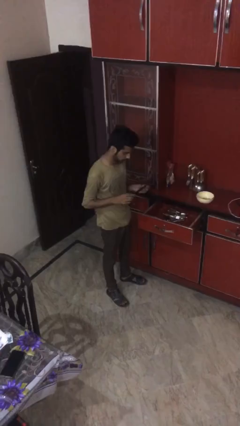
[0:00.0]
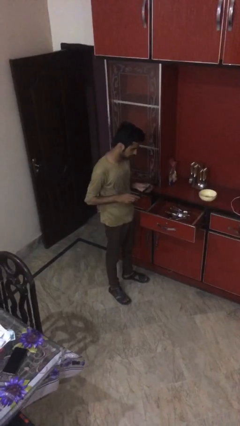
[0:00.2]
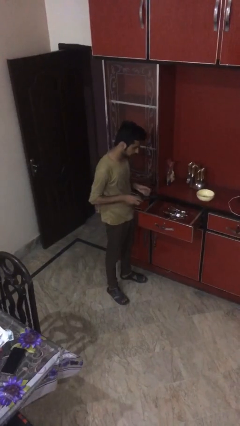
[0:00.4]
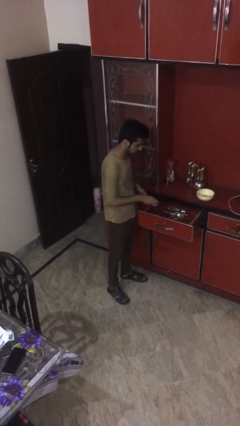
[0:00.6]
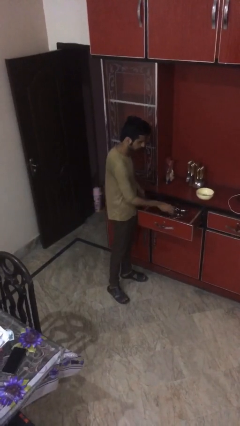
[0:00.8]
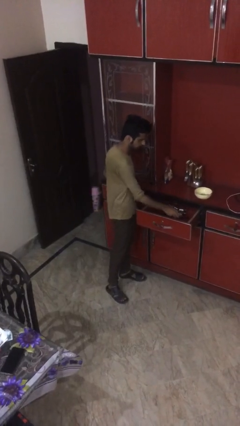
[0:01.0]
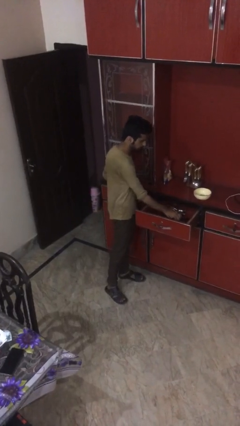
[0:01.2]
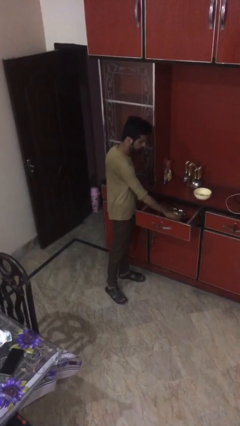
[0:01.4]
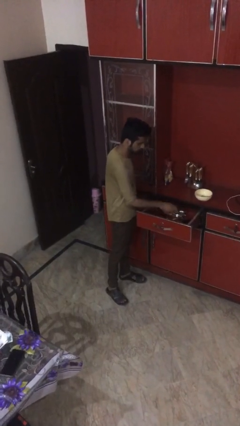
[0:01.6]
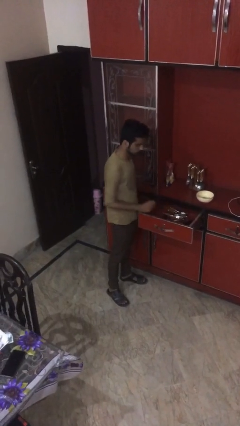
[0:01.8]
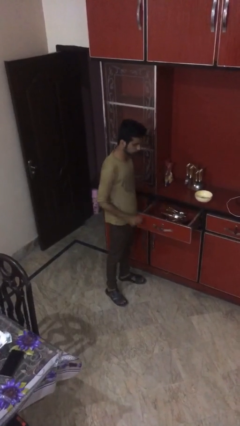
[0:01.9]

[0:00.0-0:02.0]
person puts object into kitchen drawer

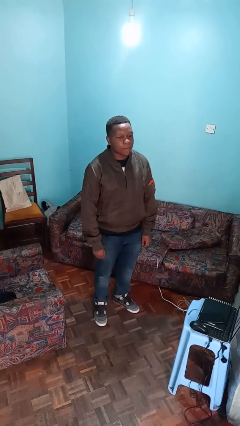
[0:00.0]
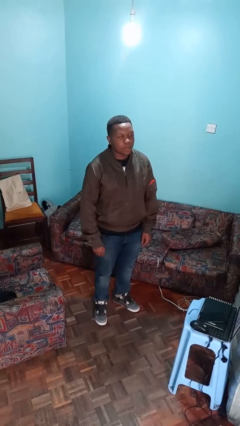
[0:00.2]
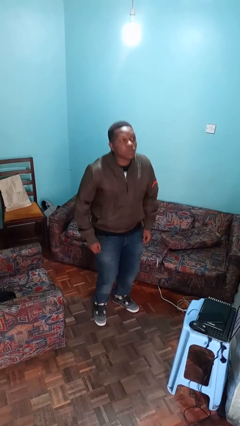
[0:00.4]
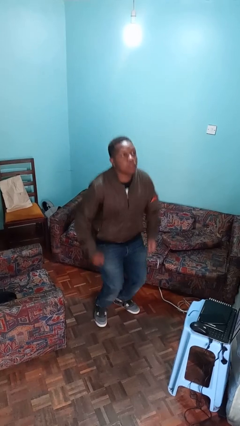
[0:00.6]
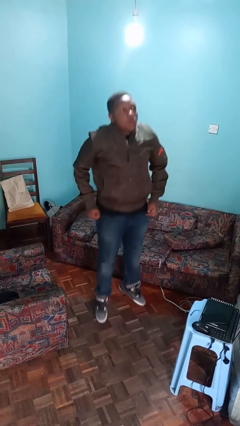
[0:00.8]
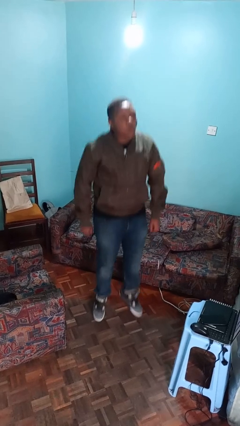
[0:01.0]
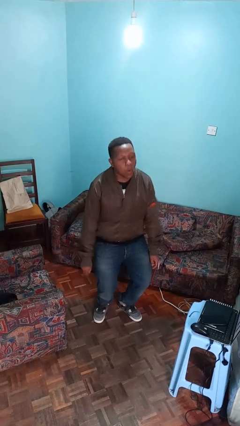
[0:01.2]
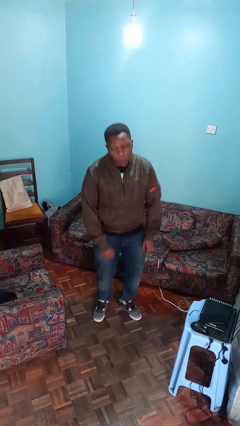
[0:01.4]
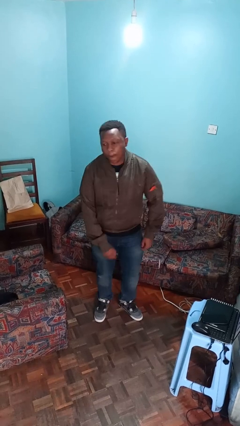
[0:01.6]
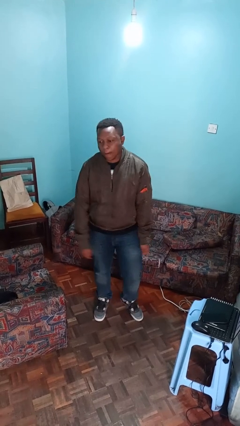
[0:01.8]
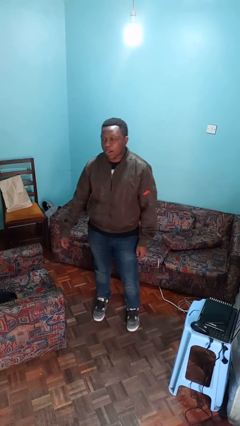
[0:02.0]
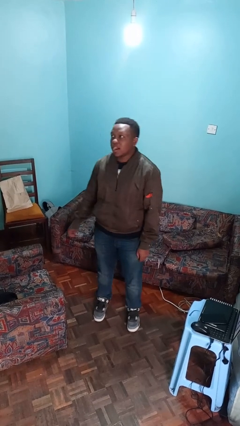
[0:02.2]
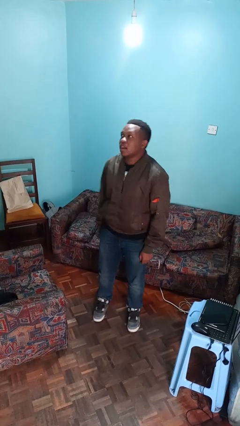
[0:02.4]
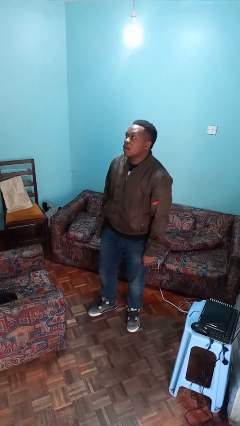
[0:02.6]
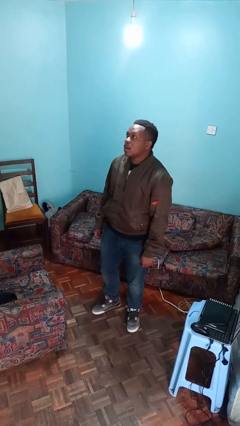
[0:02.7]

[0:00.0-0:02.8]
person jumps

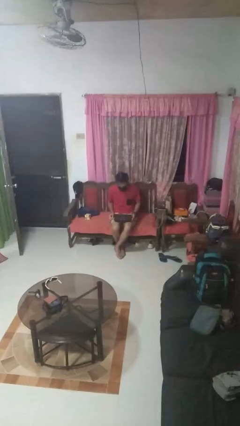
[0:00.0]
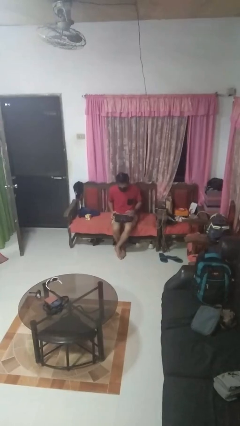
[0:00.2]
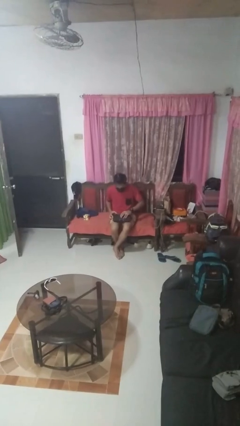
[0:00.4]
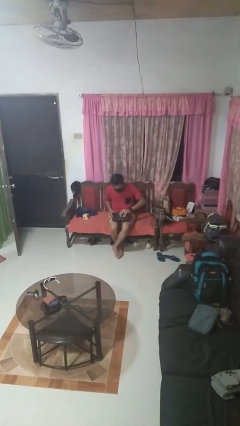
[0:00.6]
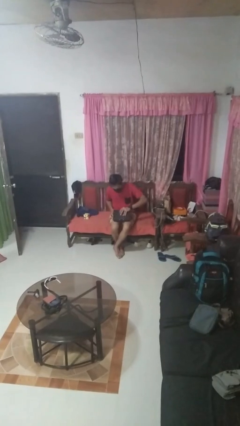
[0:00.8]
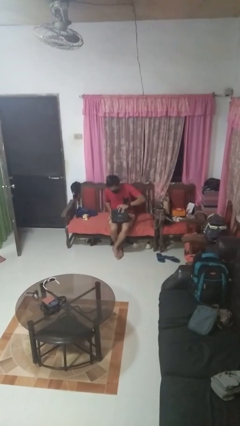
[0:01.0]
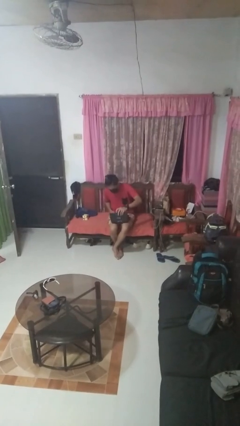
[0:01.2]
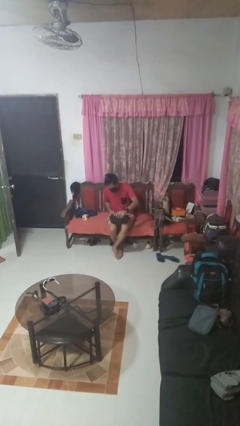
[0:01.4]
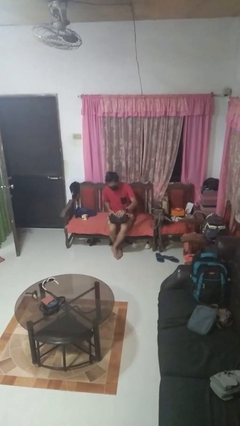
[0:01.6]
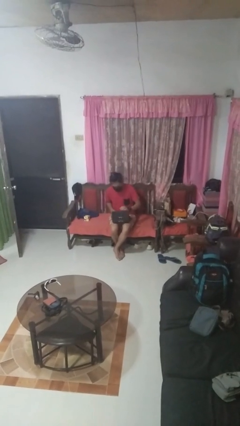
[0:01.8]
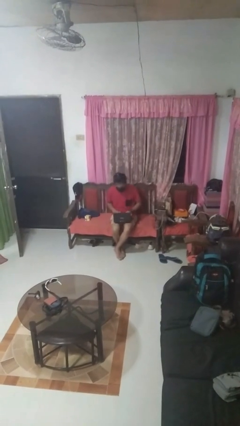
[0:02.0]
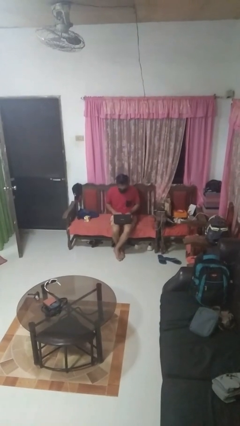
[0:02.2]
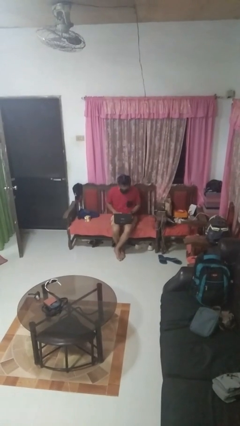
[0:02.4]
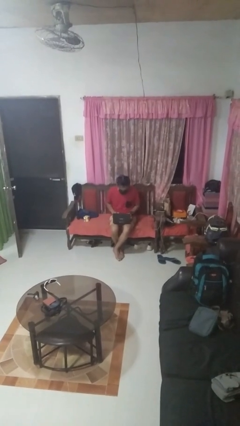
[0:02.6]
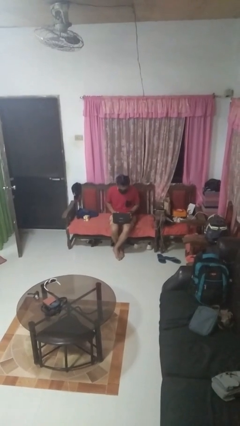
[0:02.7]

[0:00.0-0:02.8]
person opens laptop

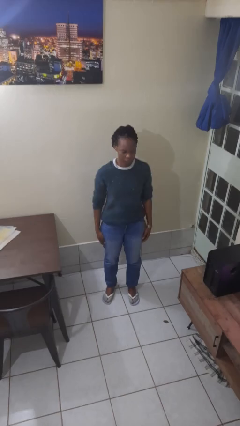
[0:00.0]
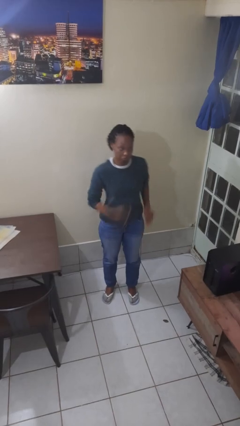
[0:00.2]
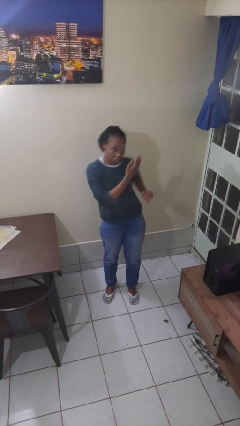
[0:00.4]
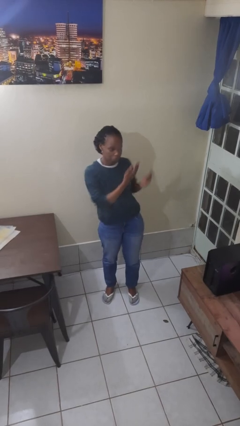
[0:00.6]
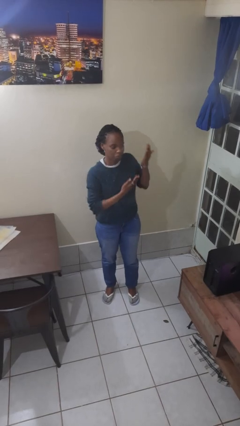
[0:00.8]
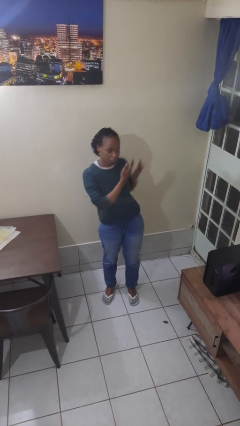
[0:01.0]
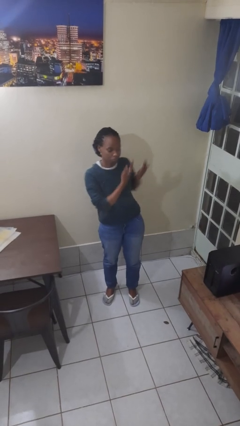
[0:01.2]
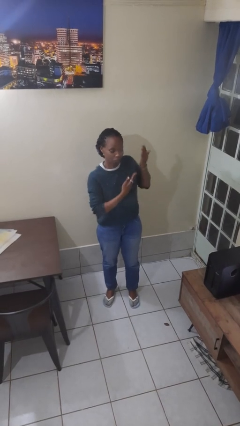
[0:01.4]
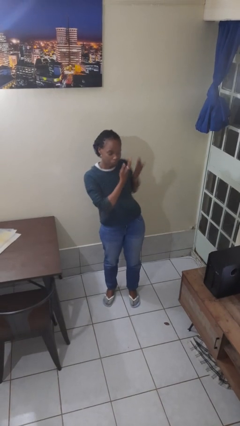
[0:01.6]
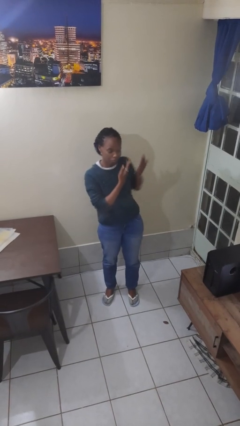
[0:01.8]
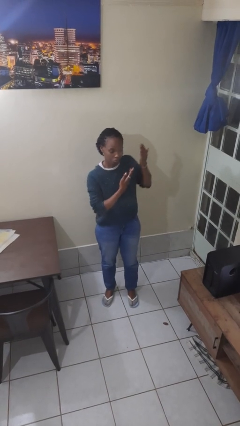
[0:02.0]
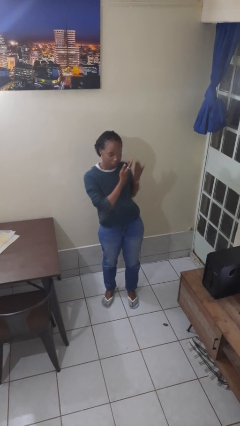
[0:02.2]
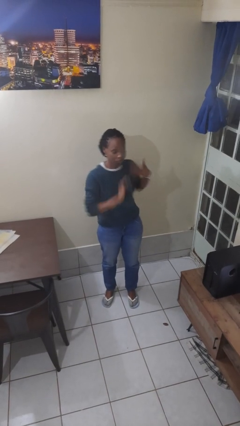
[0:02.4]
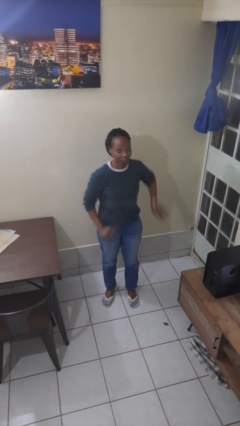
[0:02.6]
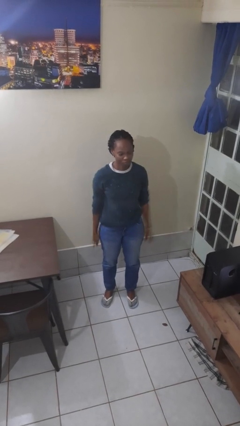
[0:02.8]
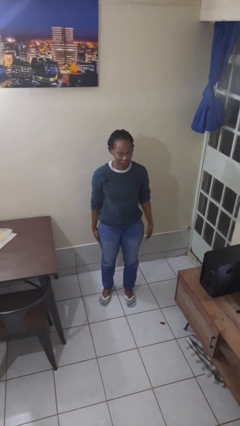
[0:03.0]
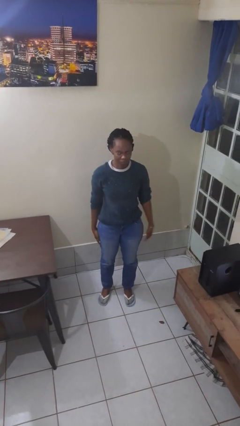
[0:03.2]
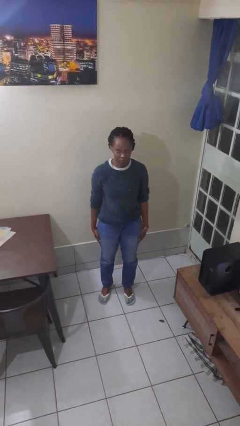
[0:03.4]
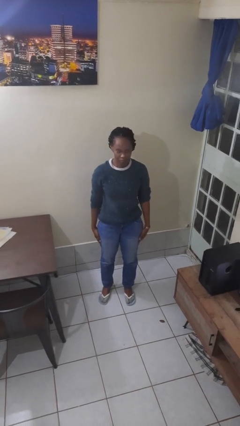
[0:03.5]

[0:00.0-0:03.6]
person dances in place

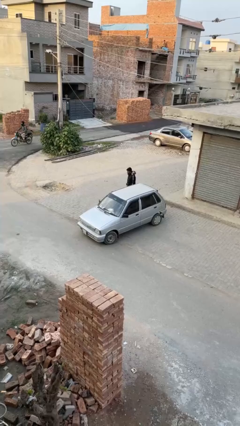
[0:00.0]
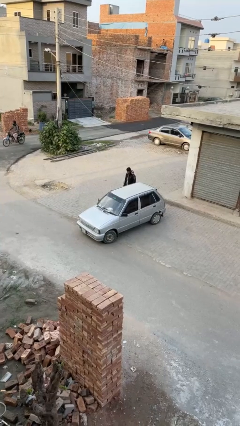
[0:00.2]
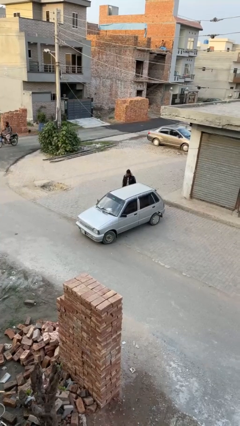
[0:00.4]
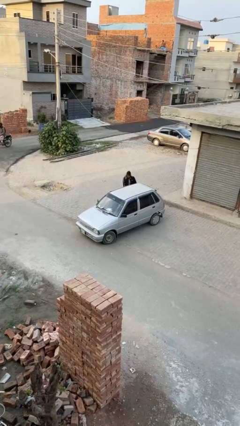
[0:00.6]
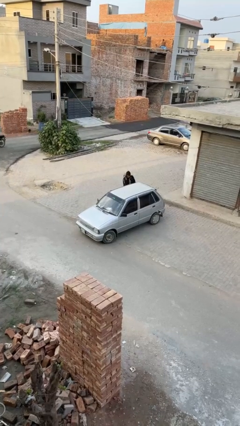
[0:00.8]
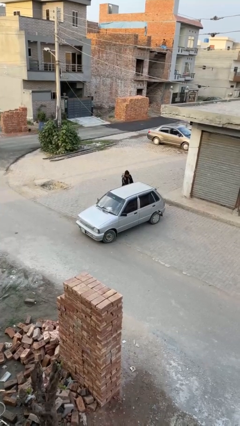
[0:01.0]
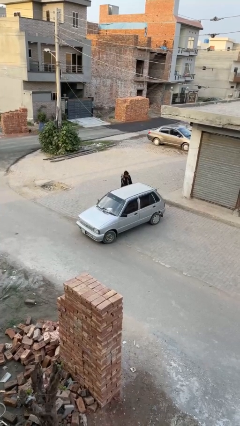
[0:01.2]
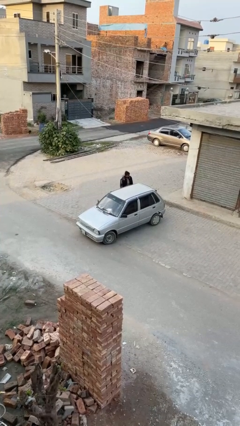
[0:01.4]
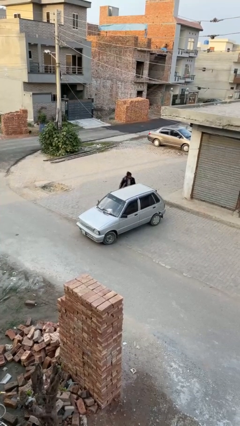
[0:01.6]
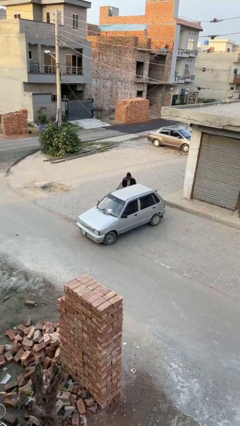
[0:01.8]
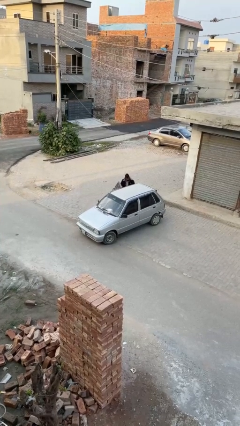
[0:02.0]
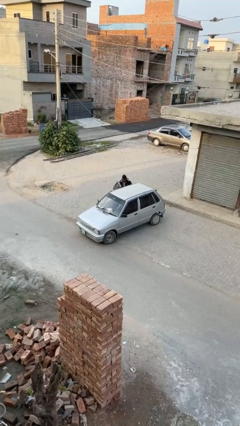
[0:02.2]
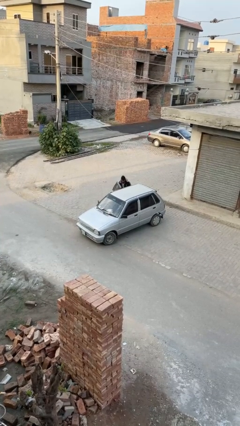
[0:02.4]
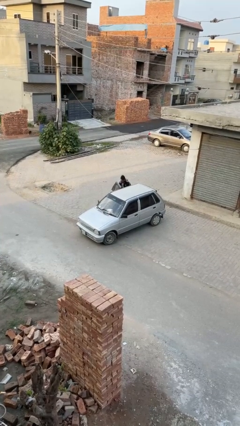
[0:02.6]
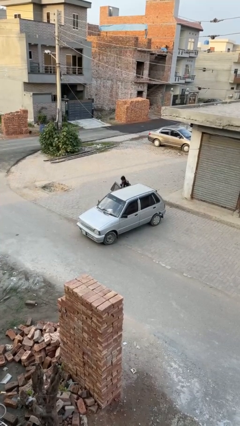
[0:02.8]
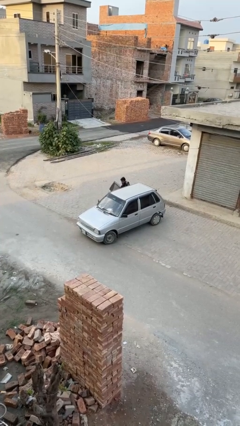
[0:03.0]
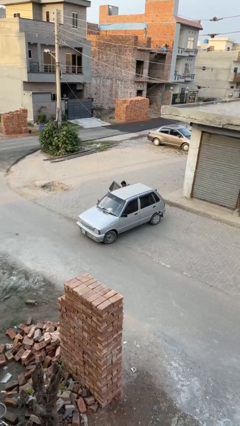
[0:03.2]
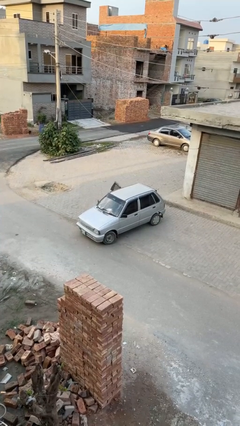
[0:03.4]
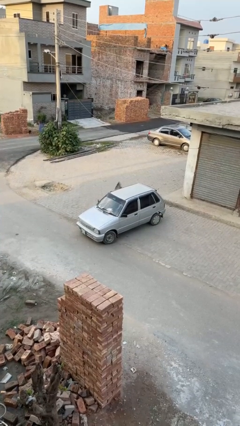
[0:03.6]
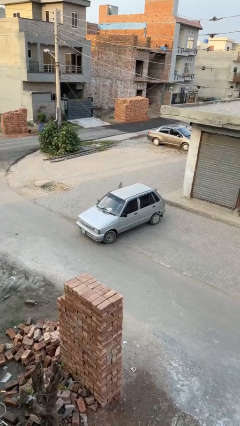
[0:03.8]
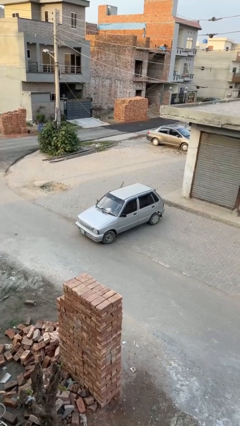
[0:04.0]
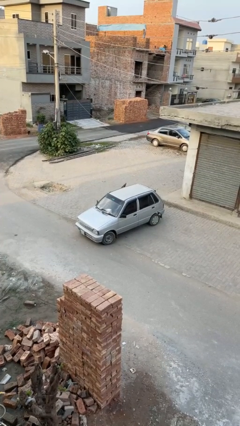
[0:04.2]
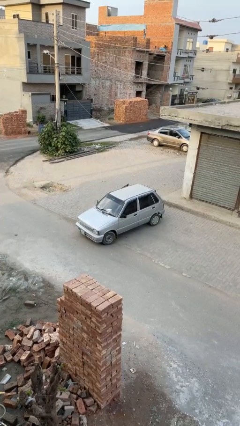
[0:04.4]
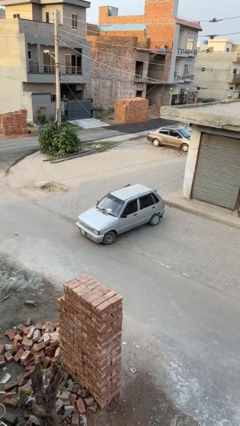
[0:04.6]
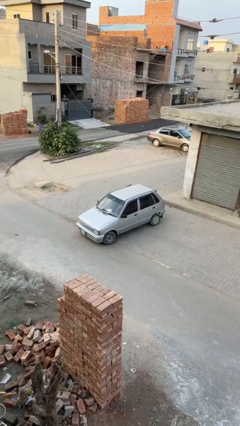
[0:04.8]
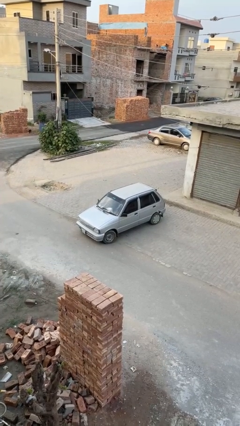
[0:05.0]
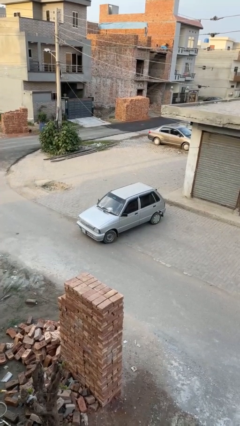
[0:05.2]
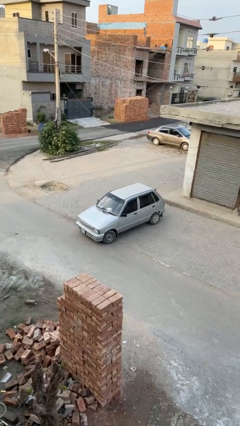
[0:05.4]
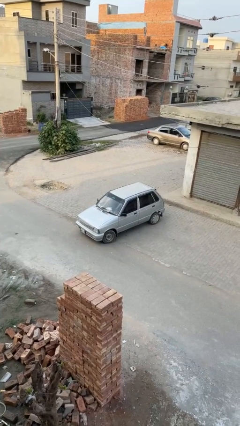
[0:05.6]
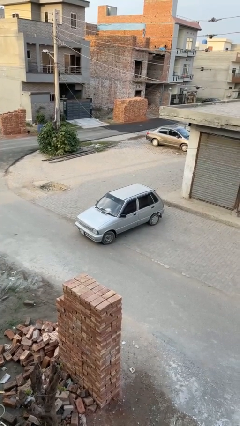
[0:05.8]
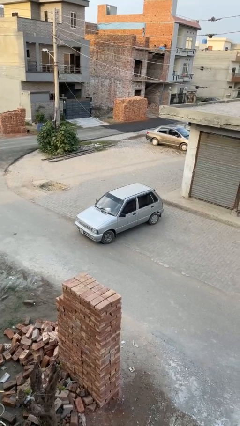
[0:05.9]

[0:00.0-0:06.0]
car picks up person

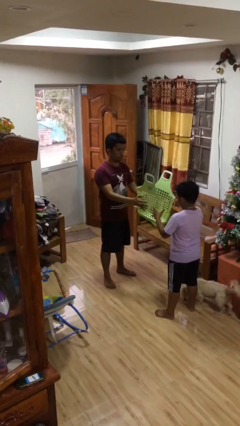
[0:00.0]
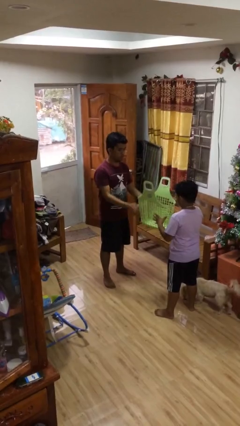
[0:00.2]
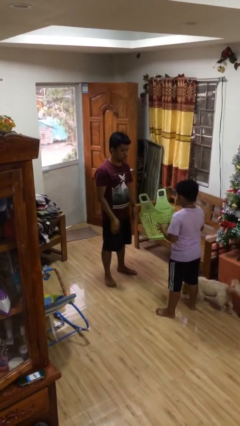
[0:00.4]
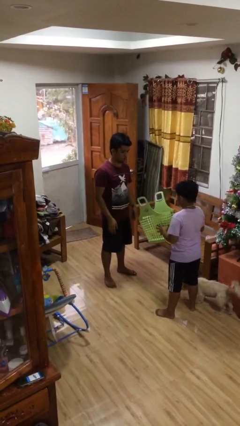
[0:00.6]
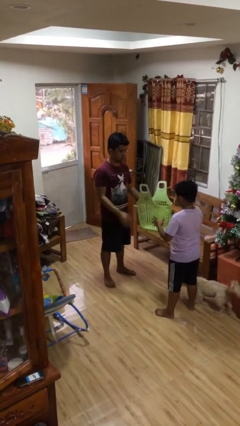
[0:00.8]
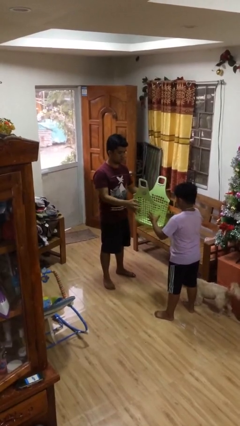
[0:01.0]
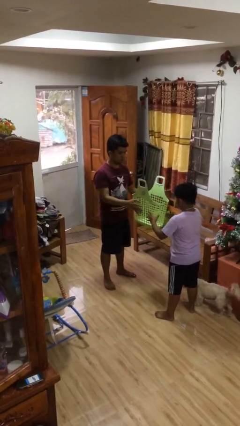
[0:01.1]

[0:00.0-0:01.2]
person transfers object to person
